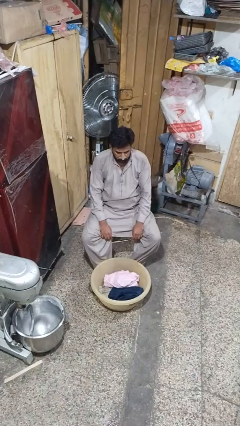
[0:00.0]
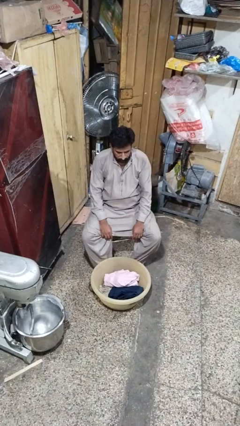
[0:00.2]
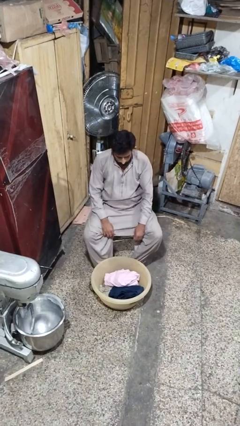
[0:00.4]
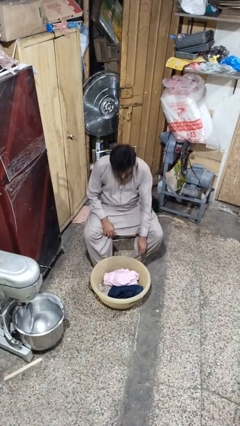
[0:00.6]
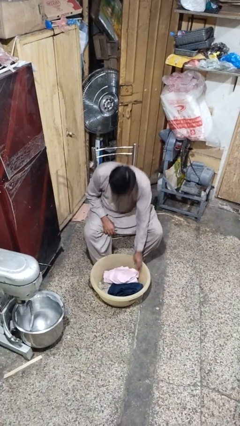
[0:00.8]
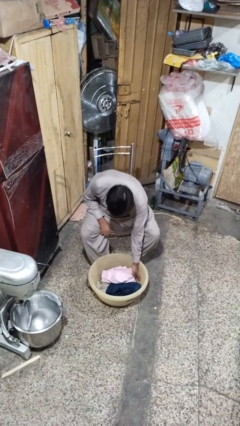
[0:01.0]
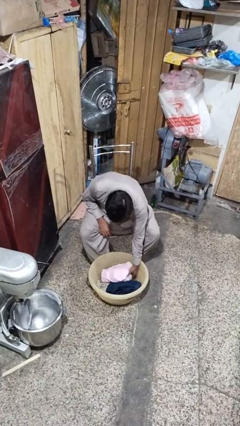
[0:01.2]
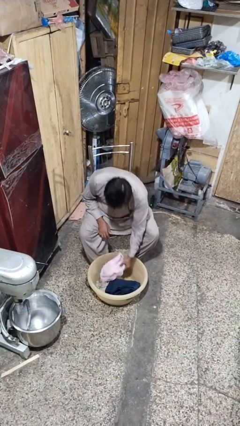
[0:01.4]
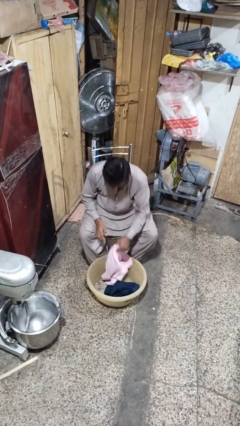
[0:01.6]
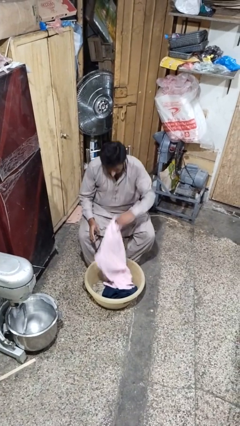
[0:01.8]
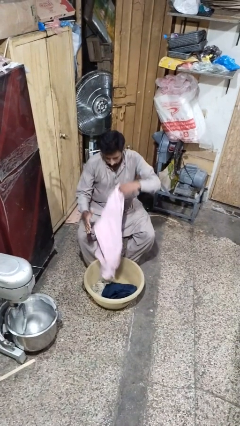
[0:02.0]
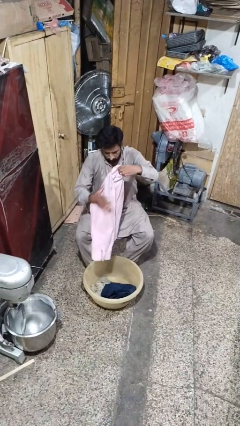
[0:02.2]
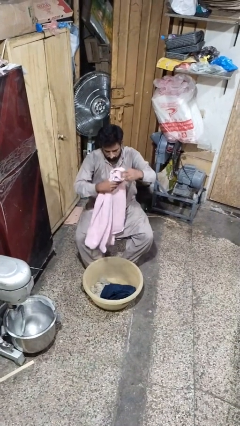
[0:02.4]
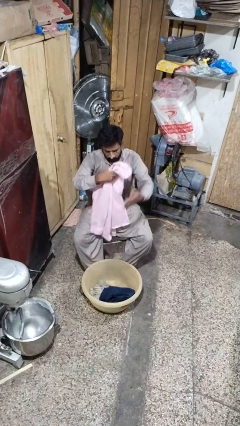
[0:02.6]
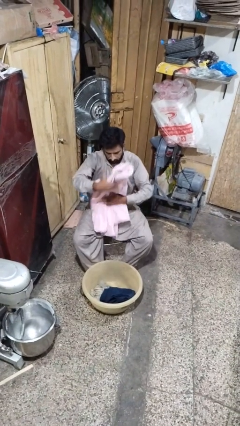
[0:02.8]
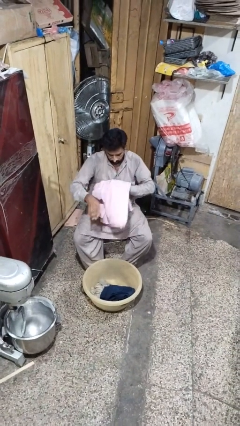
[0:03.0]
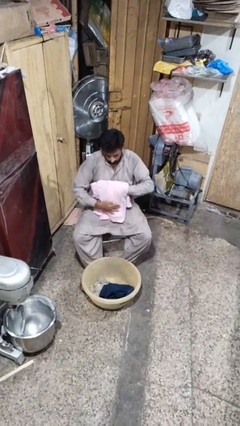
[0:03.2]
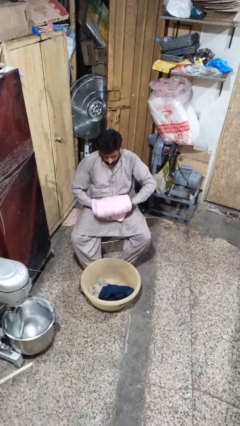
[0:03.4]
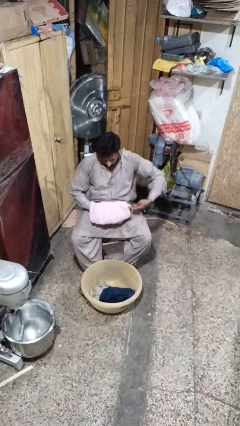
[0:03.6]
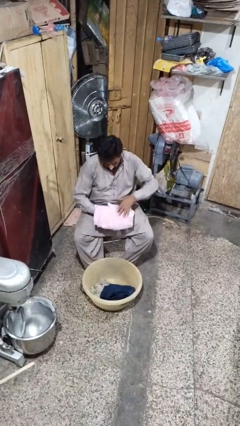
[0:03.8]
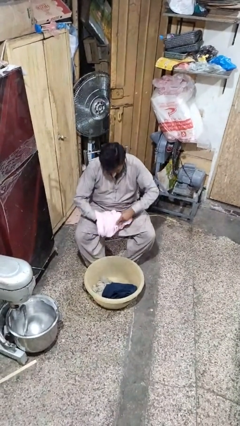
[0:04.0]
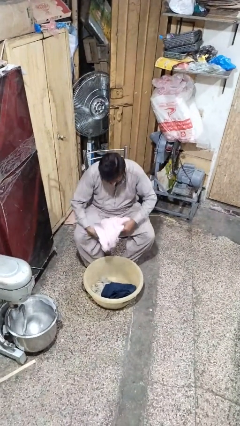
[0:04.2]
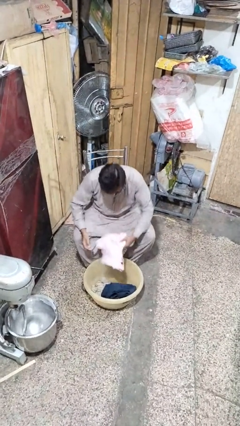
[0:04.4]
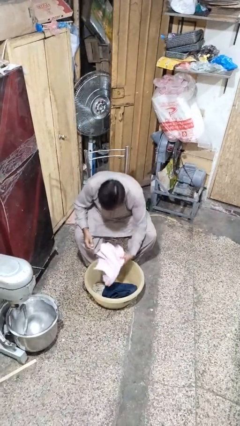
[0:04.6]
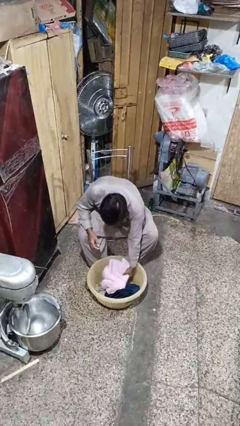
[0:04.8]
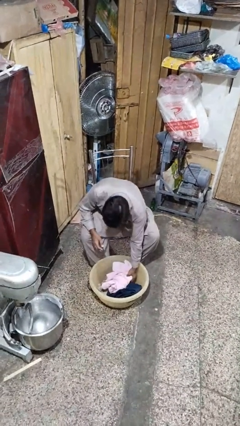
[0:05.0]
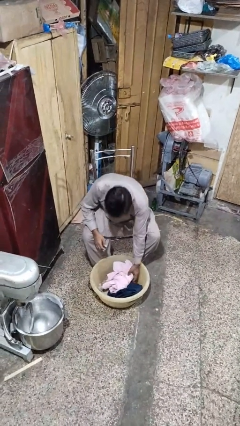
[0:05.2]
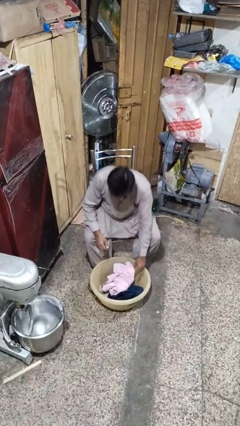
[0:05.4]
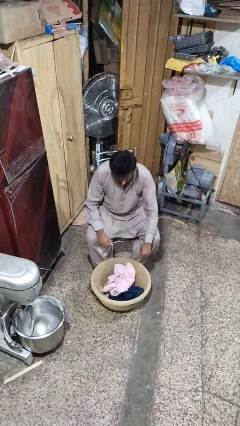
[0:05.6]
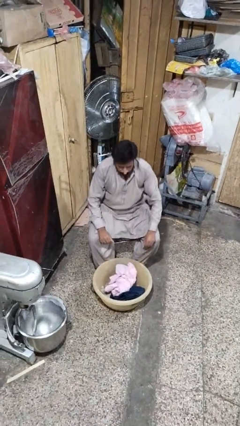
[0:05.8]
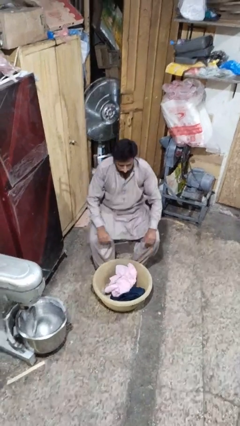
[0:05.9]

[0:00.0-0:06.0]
person folds shirt

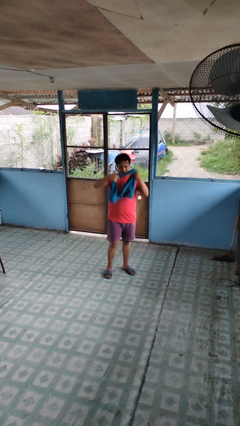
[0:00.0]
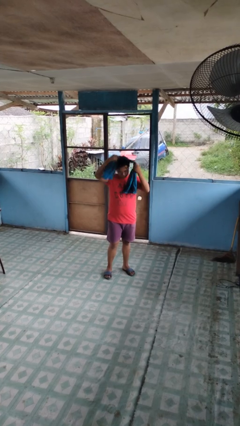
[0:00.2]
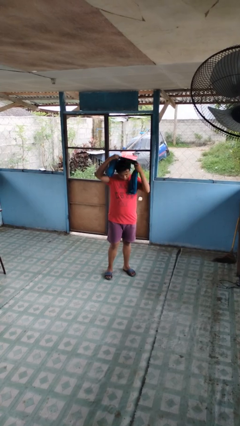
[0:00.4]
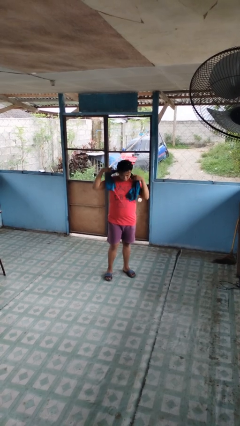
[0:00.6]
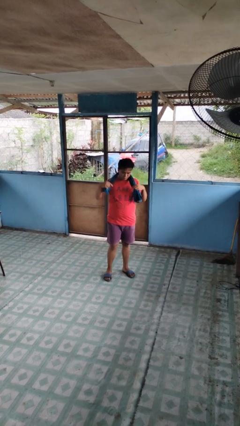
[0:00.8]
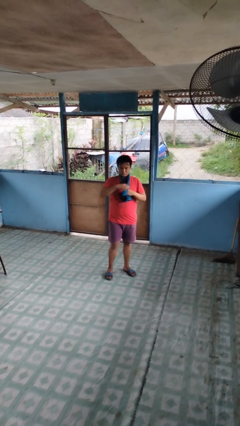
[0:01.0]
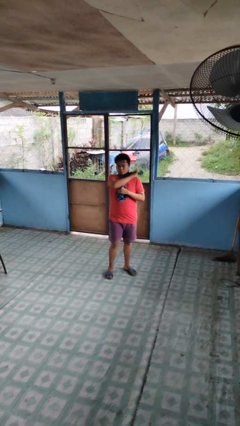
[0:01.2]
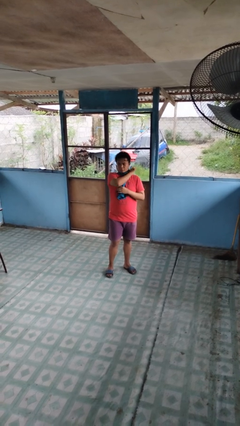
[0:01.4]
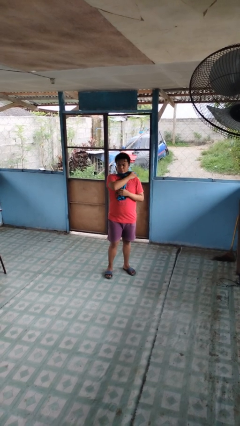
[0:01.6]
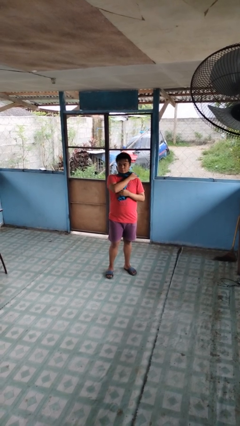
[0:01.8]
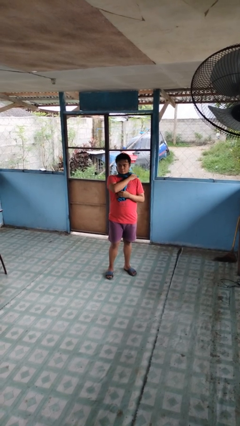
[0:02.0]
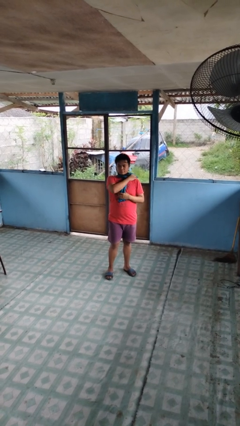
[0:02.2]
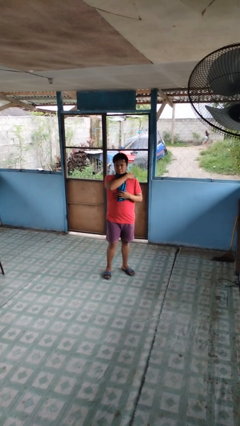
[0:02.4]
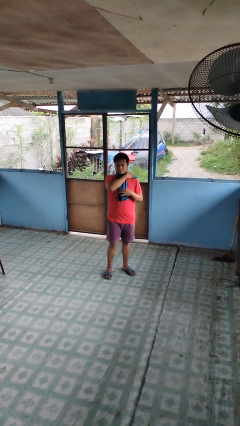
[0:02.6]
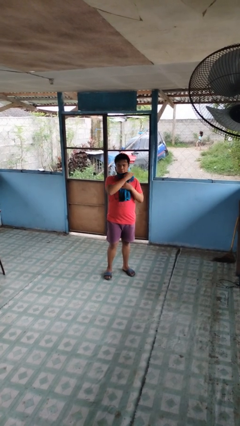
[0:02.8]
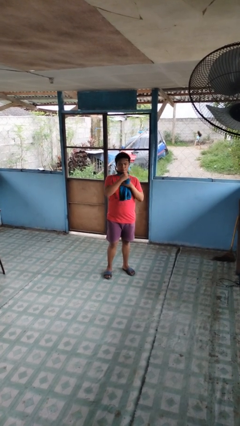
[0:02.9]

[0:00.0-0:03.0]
person puts on scarf

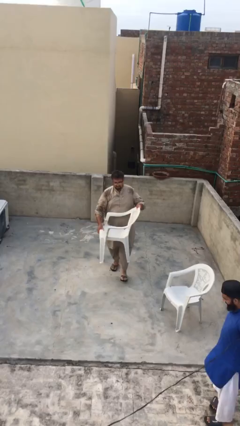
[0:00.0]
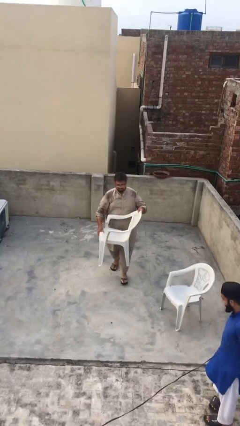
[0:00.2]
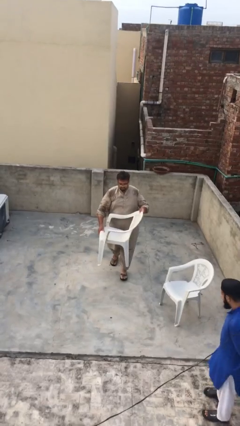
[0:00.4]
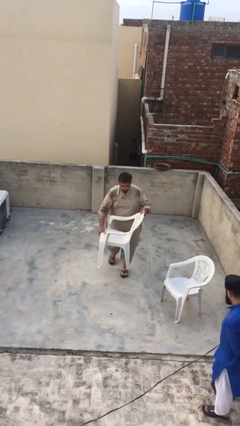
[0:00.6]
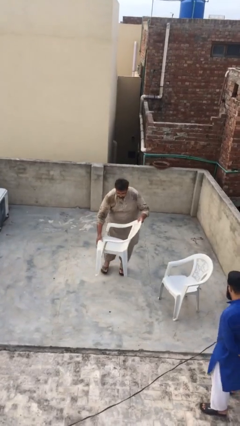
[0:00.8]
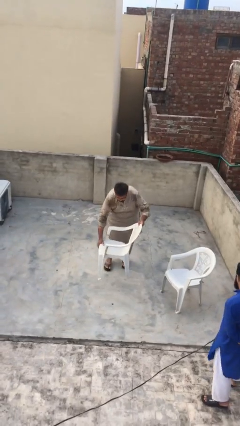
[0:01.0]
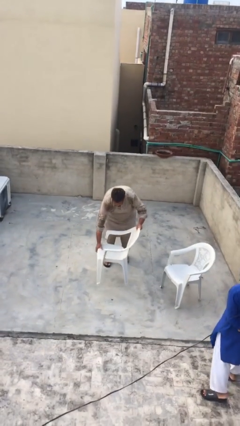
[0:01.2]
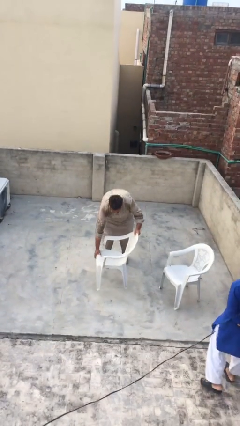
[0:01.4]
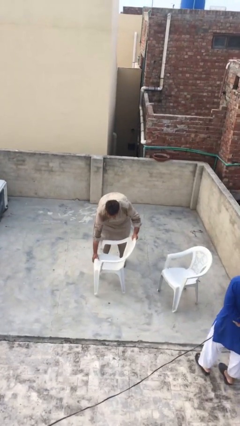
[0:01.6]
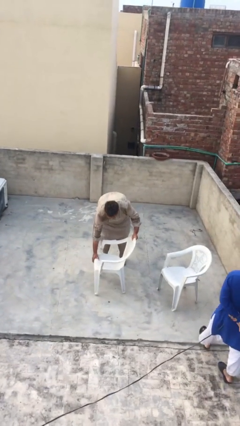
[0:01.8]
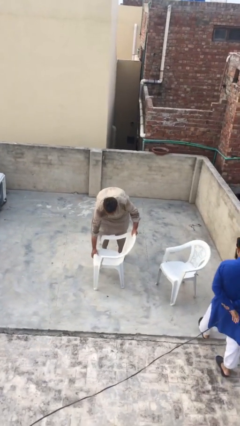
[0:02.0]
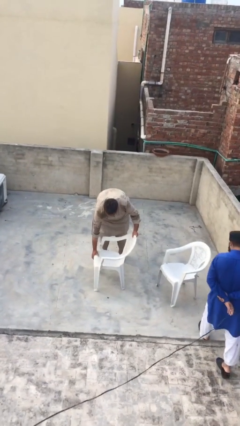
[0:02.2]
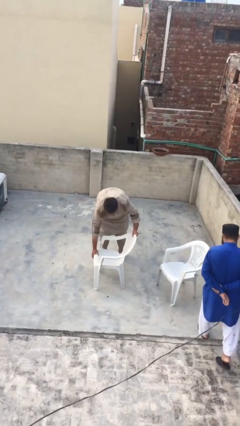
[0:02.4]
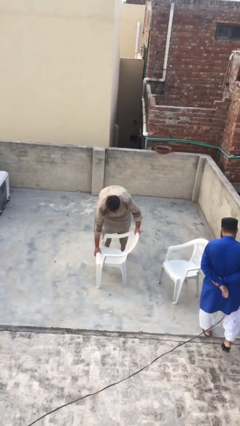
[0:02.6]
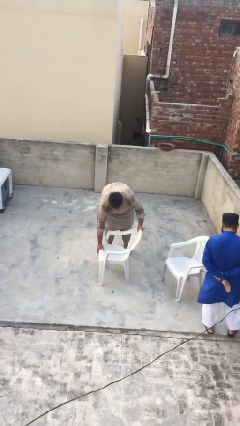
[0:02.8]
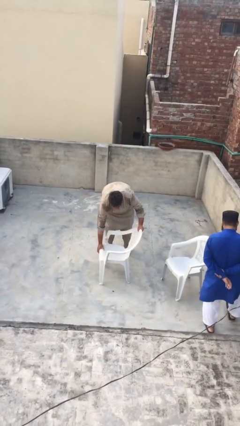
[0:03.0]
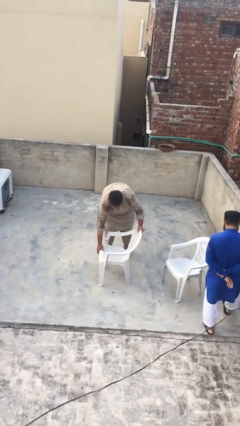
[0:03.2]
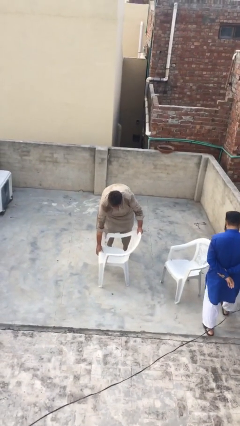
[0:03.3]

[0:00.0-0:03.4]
person puts down object on floor

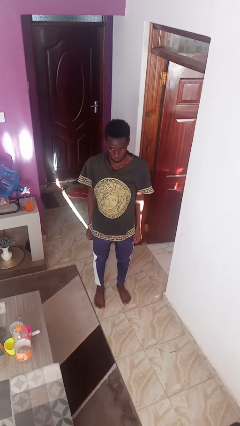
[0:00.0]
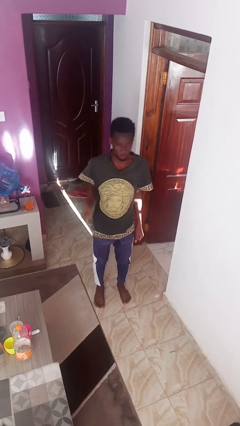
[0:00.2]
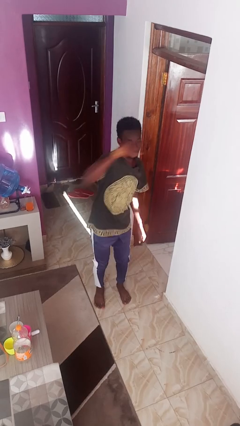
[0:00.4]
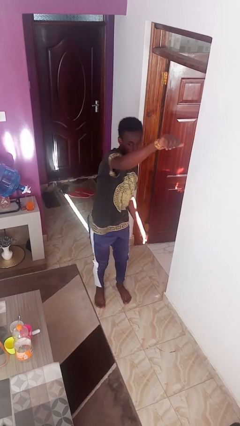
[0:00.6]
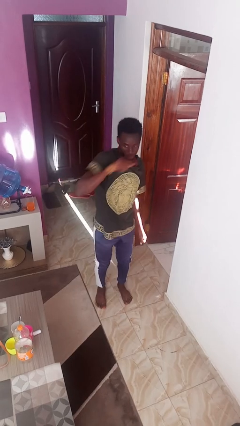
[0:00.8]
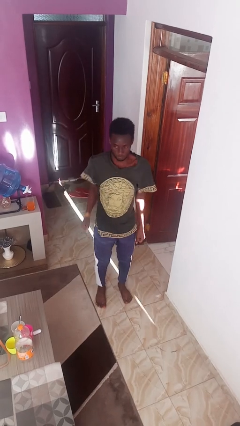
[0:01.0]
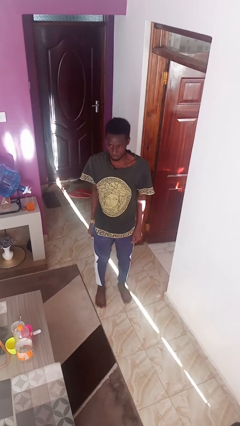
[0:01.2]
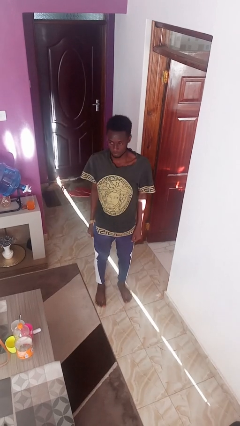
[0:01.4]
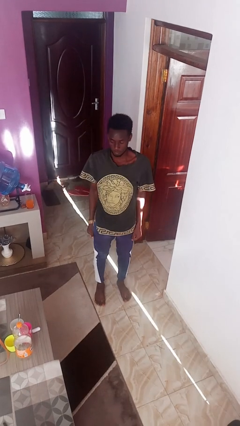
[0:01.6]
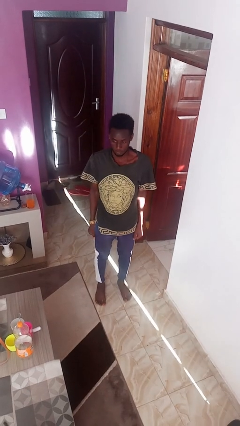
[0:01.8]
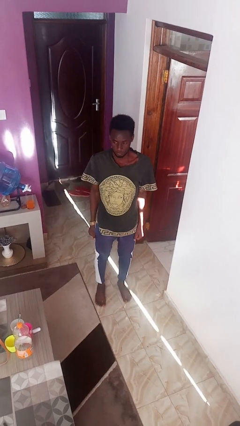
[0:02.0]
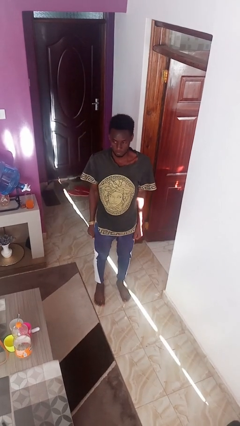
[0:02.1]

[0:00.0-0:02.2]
person punches

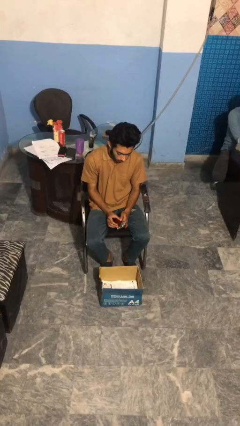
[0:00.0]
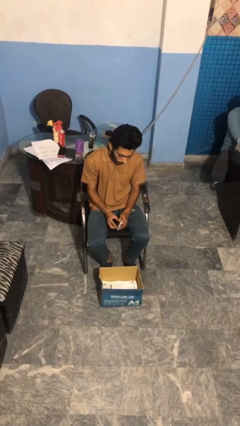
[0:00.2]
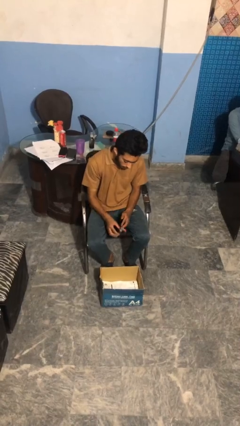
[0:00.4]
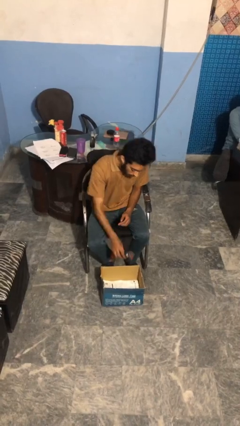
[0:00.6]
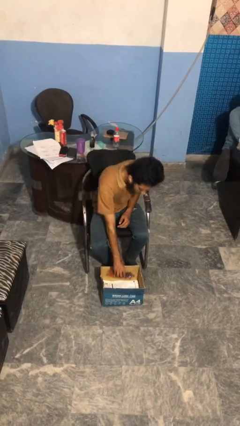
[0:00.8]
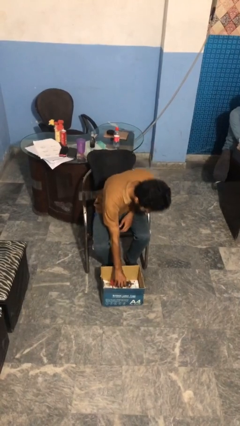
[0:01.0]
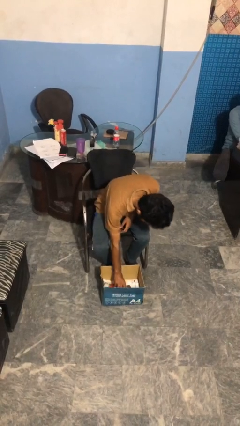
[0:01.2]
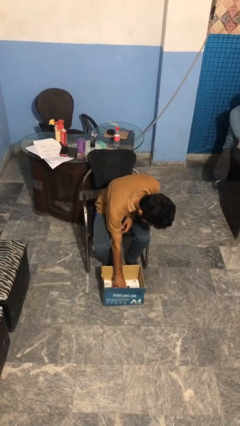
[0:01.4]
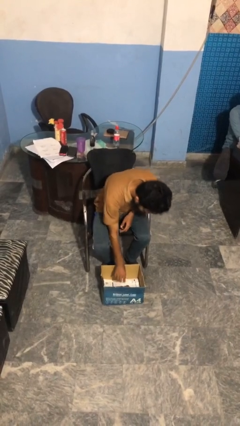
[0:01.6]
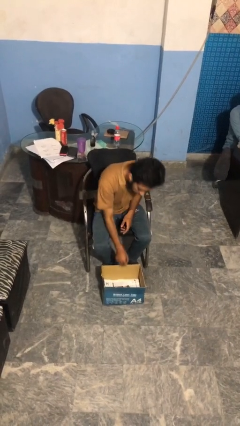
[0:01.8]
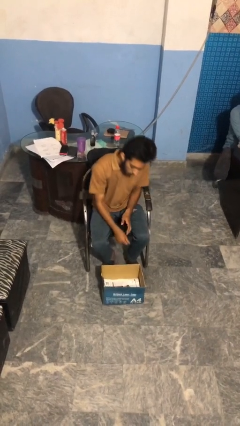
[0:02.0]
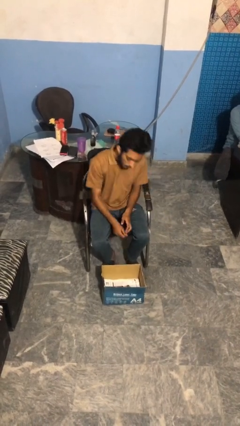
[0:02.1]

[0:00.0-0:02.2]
person puts object into box

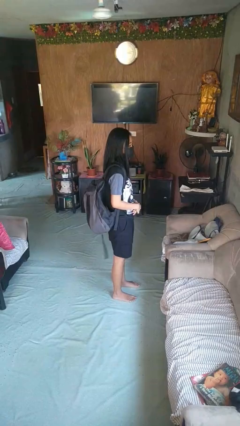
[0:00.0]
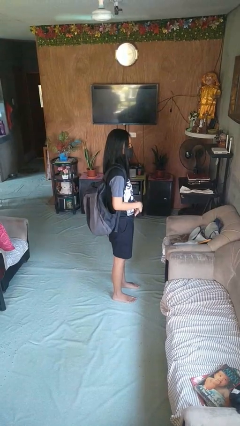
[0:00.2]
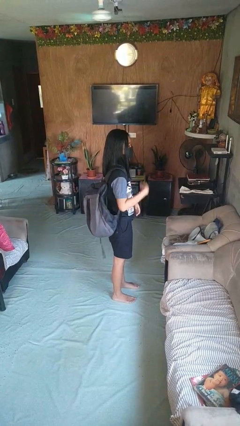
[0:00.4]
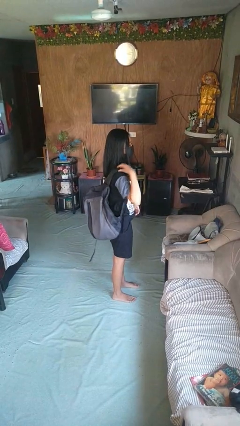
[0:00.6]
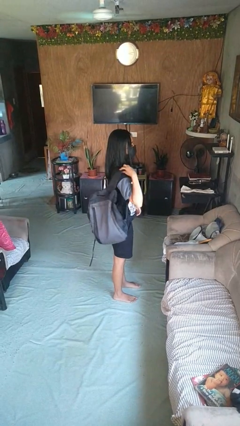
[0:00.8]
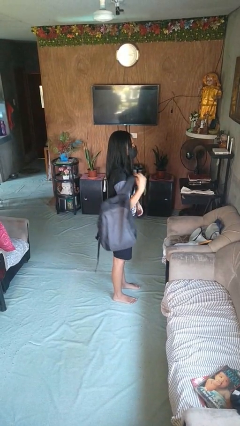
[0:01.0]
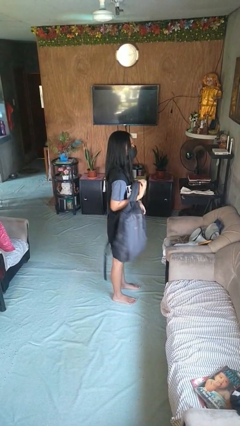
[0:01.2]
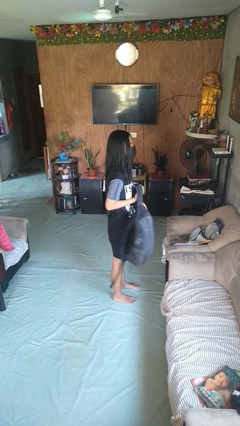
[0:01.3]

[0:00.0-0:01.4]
person takes off backpack
